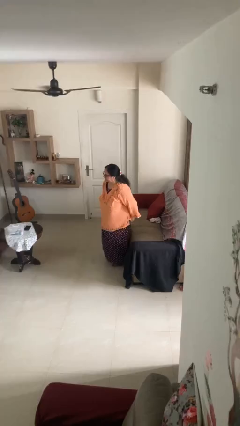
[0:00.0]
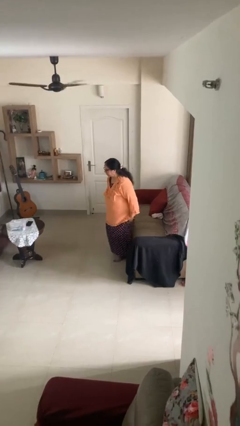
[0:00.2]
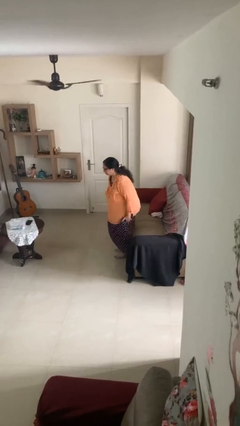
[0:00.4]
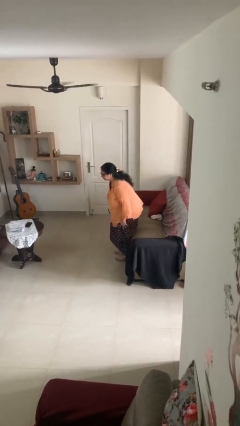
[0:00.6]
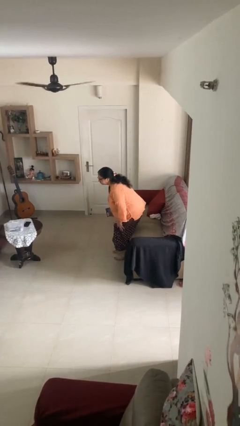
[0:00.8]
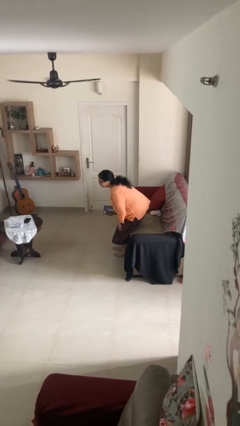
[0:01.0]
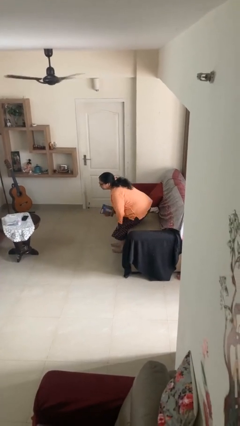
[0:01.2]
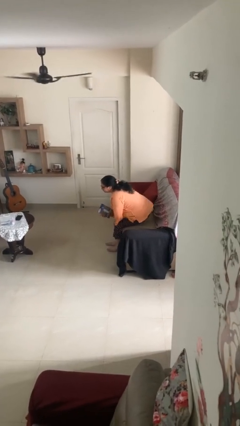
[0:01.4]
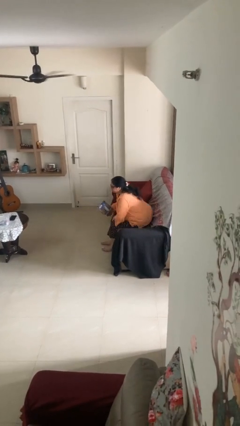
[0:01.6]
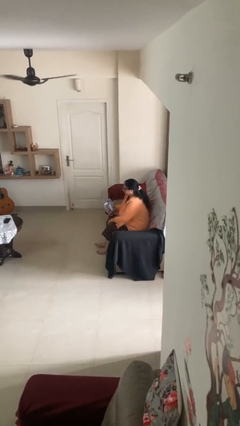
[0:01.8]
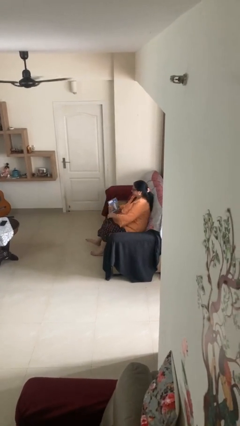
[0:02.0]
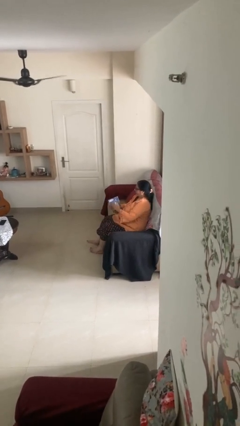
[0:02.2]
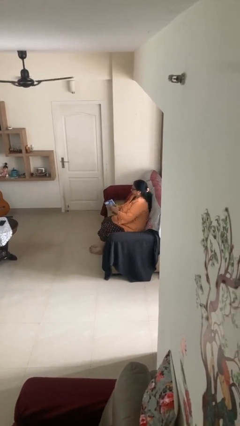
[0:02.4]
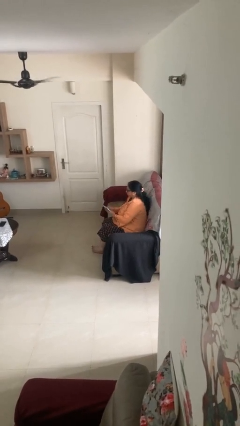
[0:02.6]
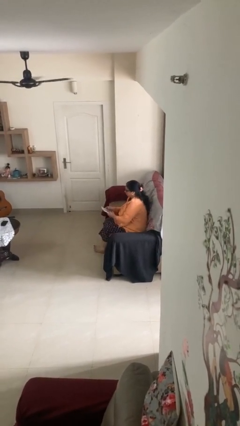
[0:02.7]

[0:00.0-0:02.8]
person sits down

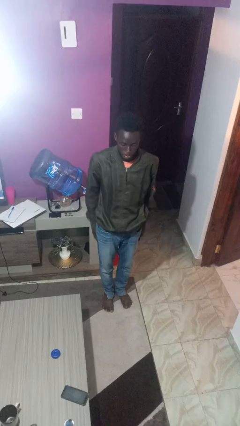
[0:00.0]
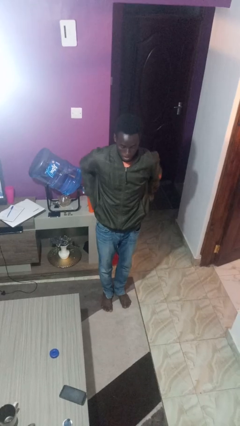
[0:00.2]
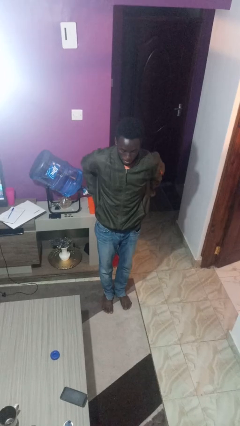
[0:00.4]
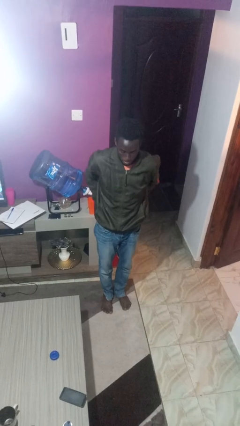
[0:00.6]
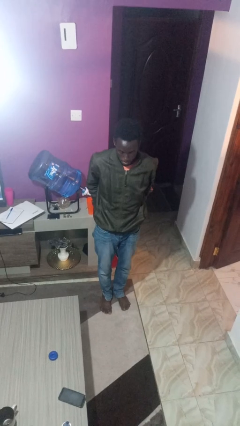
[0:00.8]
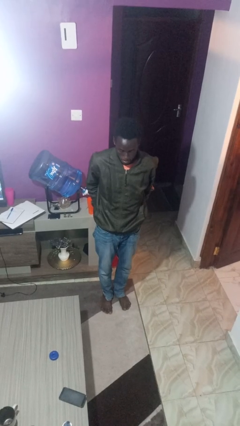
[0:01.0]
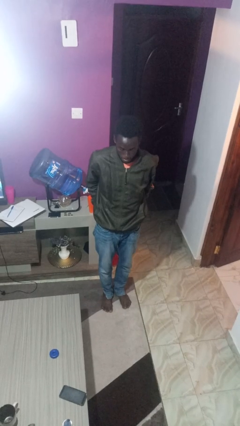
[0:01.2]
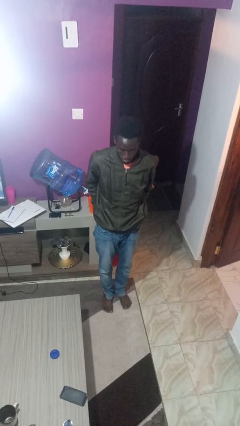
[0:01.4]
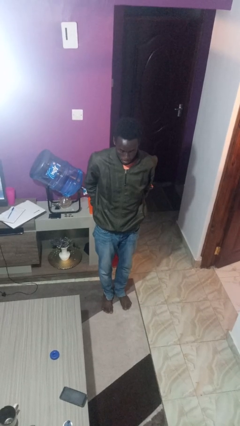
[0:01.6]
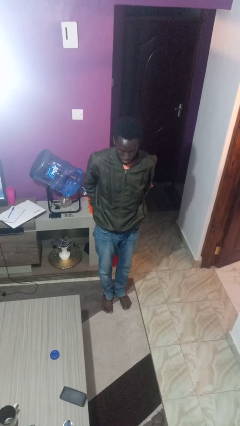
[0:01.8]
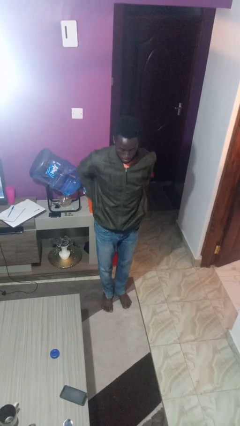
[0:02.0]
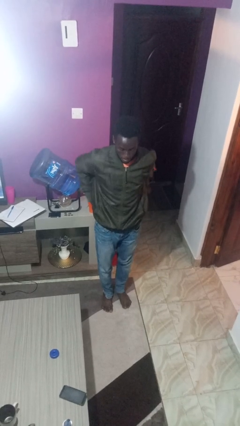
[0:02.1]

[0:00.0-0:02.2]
person puts hands in back pockets

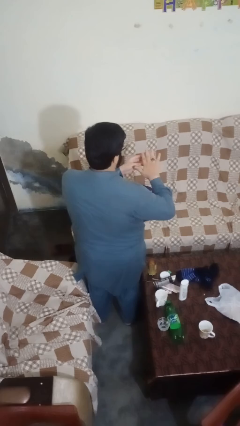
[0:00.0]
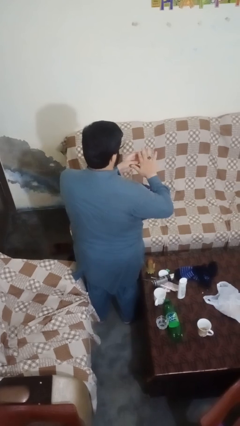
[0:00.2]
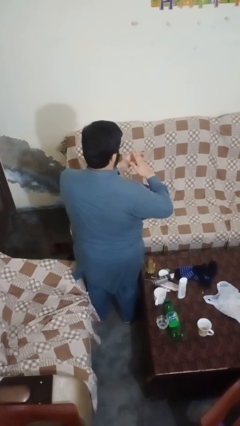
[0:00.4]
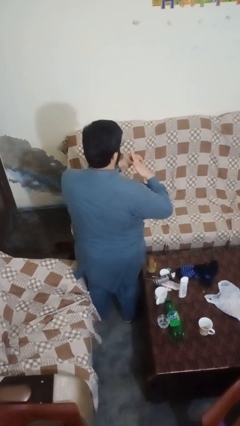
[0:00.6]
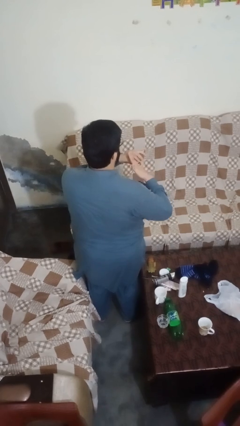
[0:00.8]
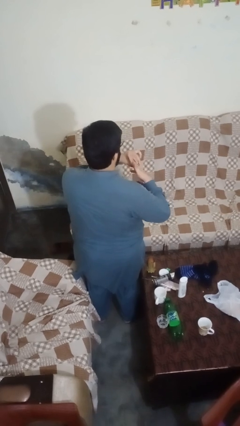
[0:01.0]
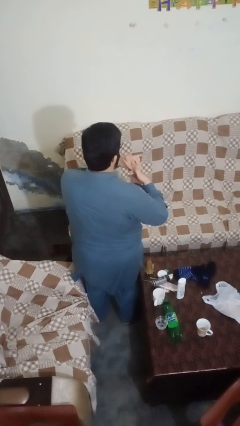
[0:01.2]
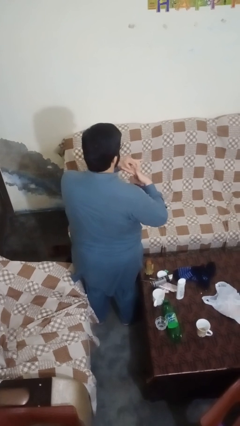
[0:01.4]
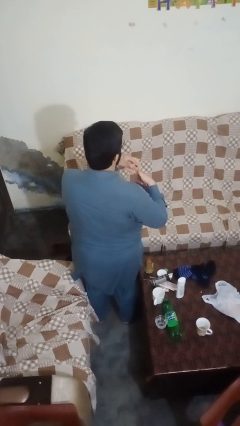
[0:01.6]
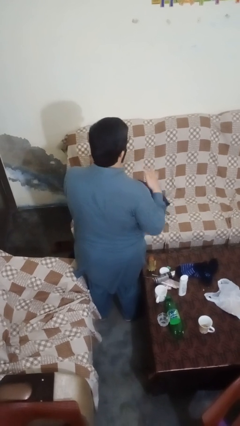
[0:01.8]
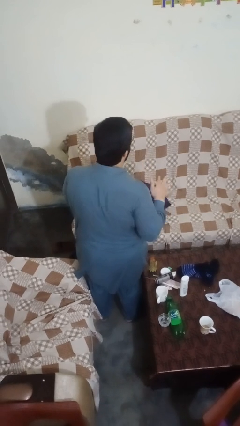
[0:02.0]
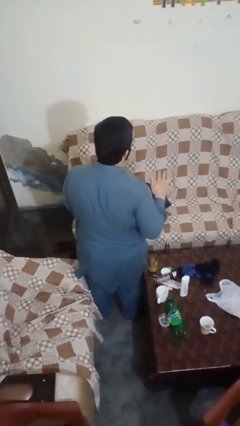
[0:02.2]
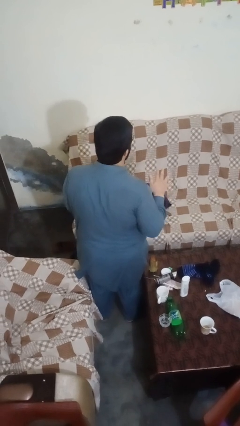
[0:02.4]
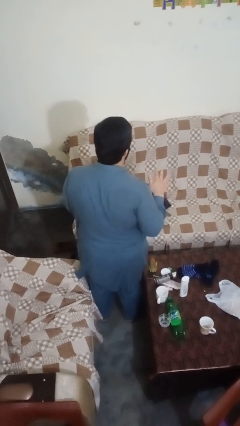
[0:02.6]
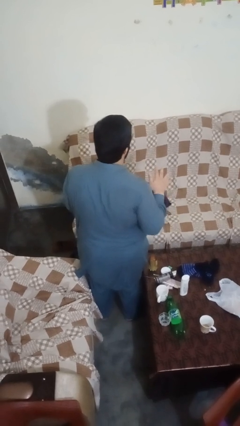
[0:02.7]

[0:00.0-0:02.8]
person takes off ring

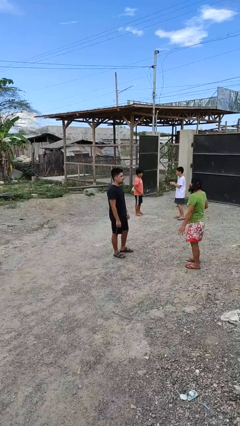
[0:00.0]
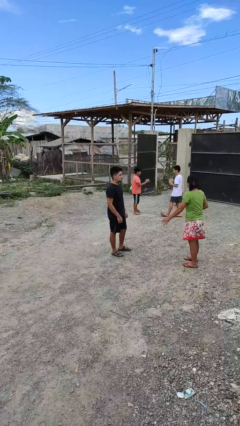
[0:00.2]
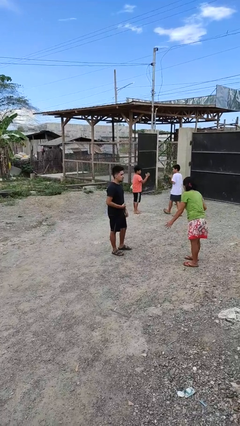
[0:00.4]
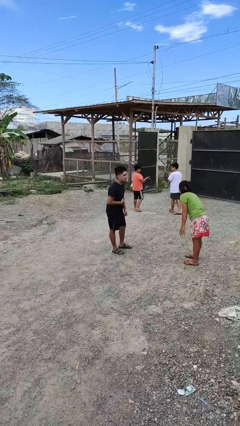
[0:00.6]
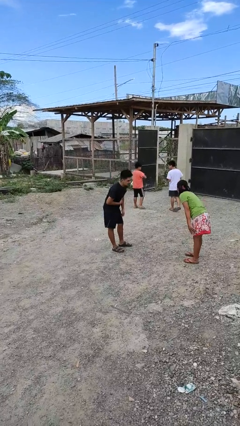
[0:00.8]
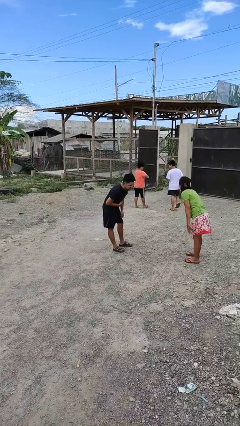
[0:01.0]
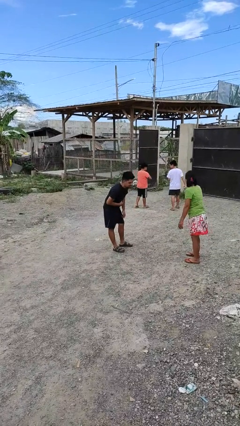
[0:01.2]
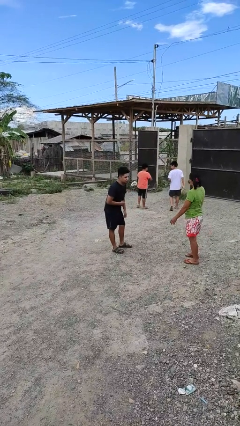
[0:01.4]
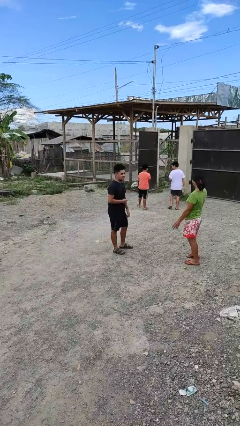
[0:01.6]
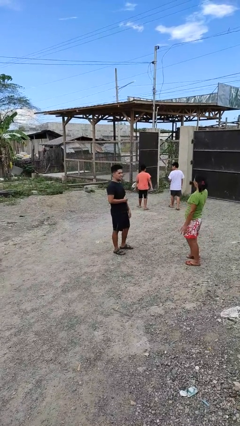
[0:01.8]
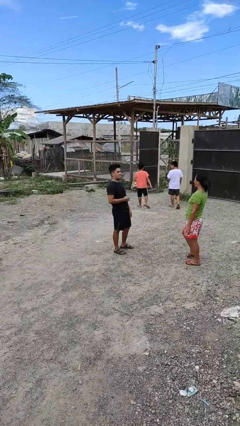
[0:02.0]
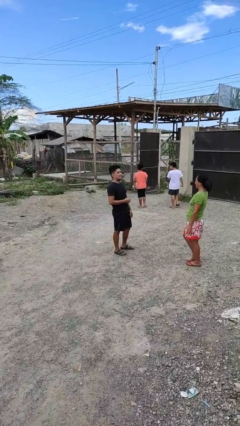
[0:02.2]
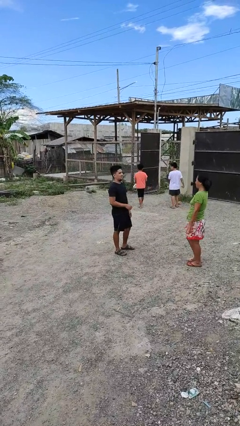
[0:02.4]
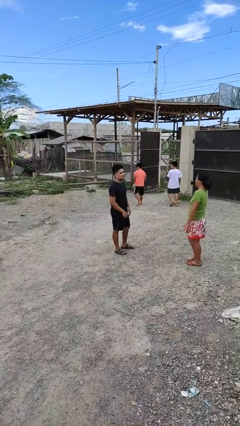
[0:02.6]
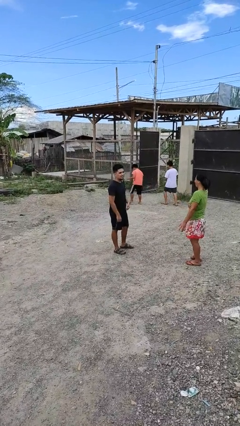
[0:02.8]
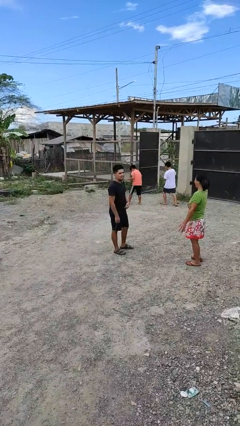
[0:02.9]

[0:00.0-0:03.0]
person laughs with person

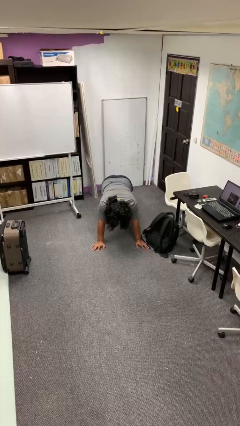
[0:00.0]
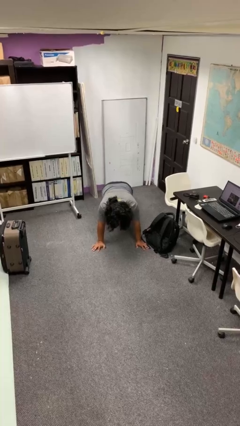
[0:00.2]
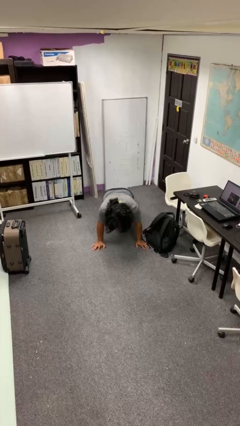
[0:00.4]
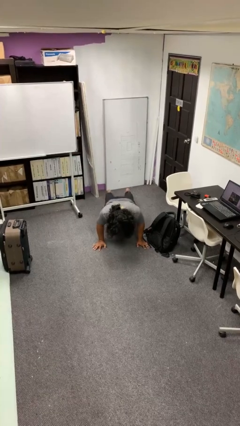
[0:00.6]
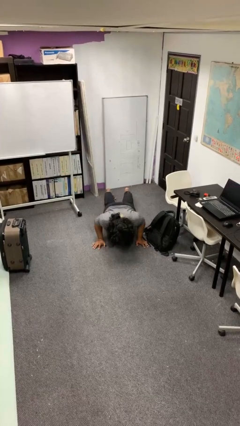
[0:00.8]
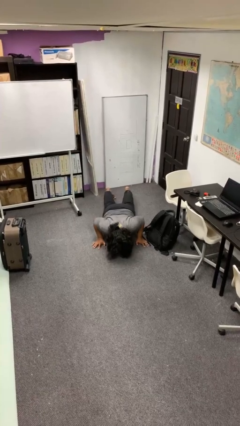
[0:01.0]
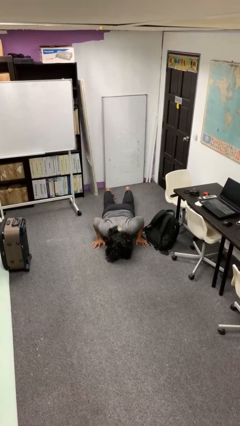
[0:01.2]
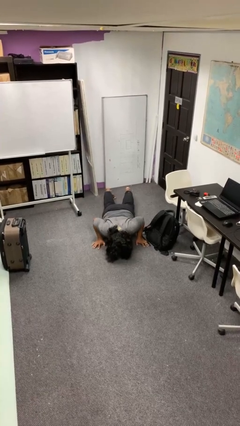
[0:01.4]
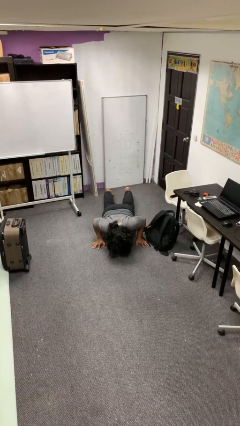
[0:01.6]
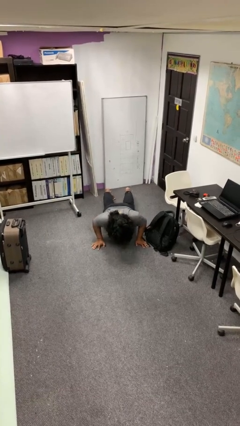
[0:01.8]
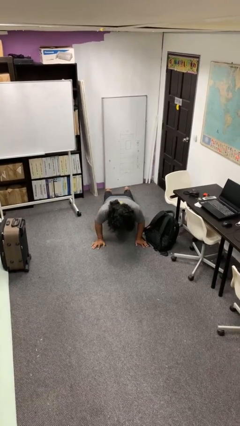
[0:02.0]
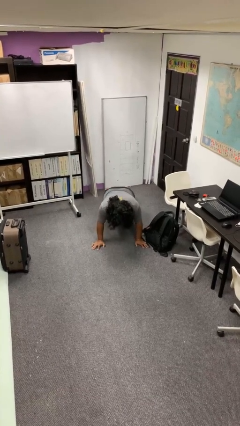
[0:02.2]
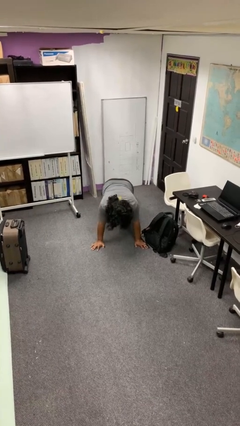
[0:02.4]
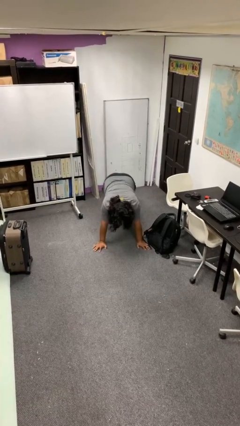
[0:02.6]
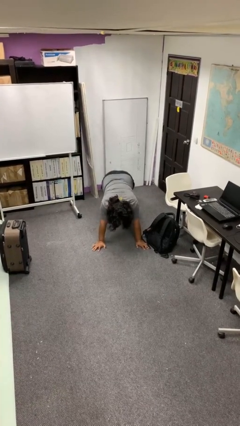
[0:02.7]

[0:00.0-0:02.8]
person exercises with pushup

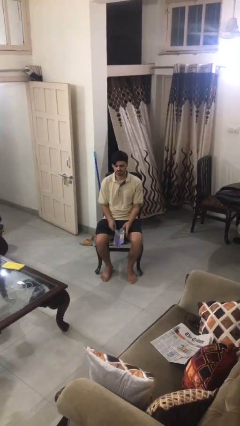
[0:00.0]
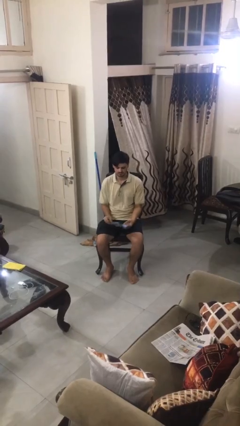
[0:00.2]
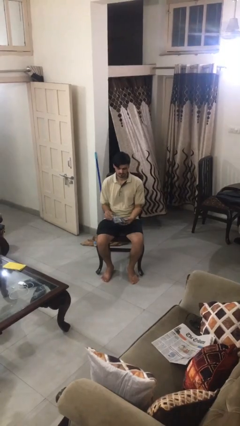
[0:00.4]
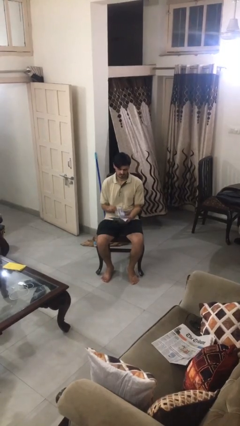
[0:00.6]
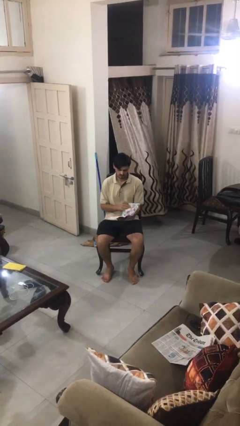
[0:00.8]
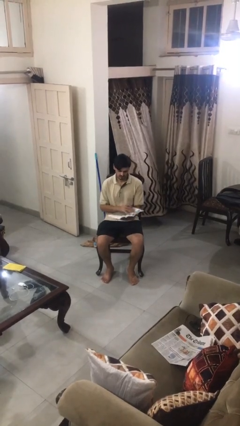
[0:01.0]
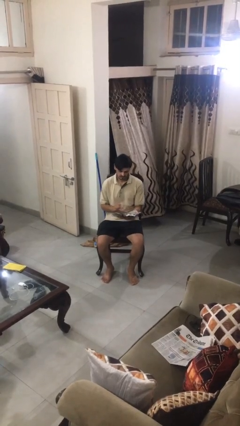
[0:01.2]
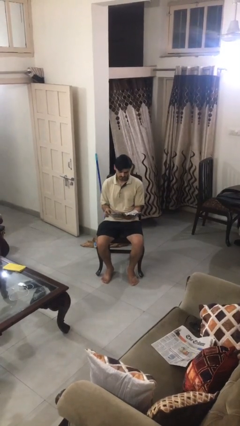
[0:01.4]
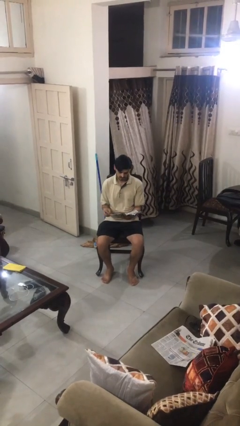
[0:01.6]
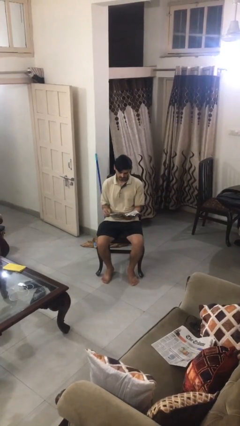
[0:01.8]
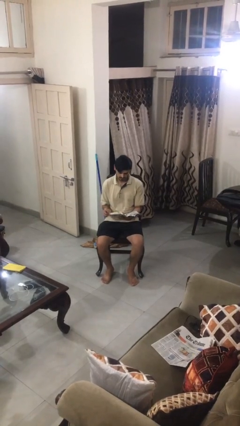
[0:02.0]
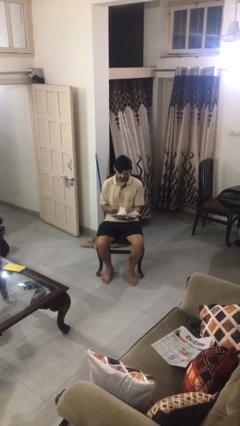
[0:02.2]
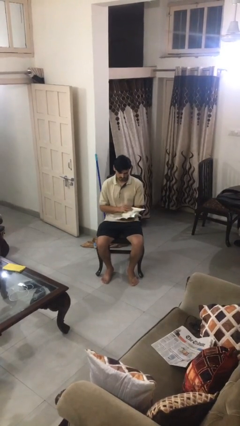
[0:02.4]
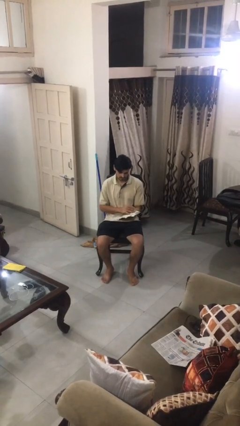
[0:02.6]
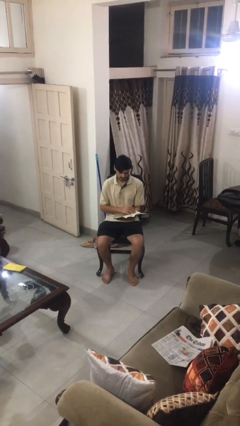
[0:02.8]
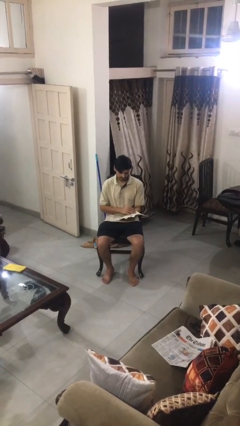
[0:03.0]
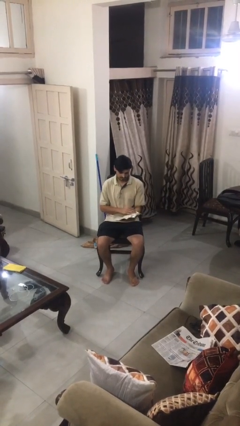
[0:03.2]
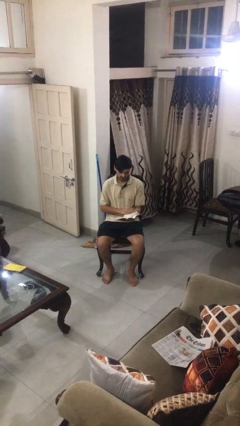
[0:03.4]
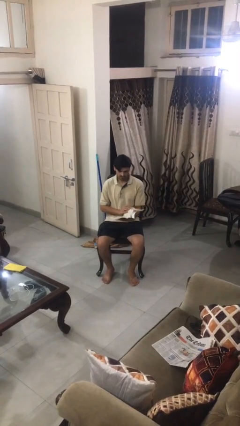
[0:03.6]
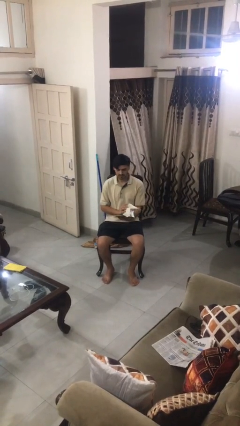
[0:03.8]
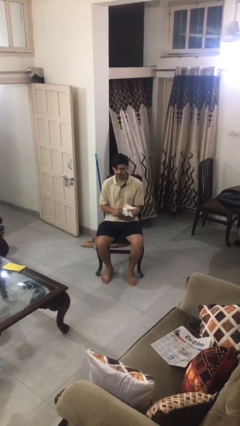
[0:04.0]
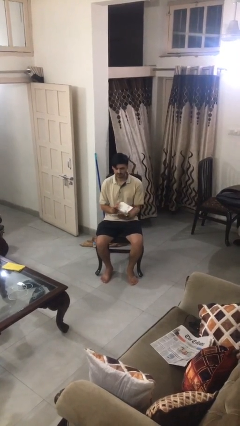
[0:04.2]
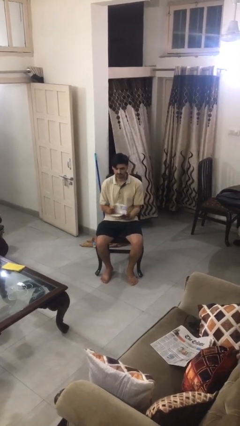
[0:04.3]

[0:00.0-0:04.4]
person reads magazine
